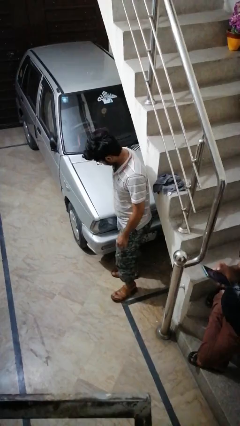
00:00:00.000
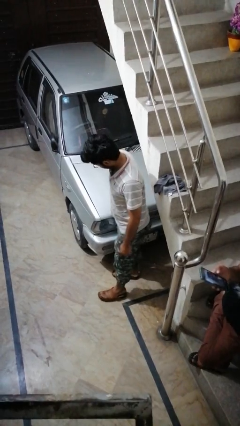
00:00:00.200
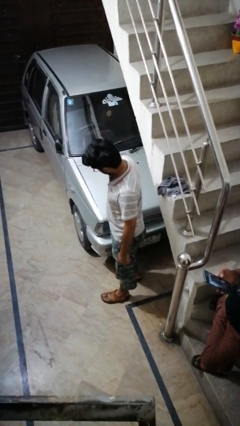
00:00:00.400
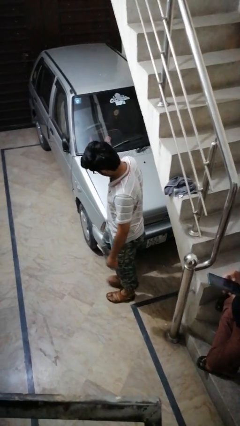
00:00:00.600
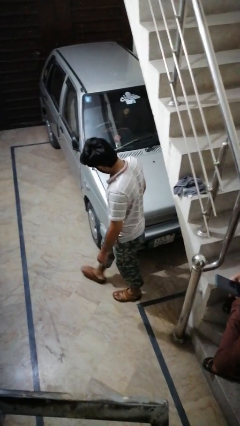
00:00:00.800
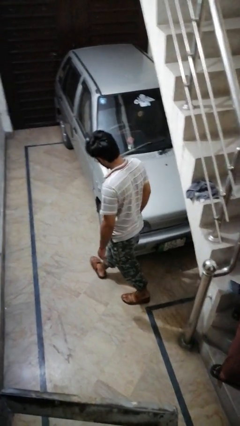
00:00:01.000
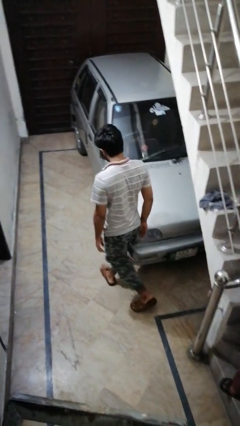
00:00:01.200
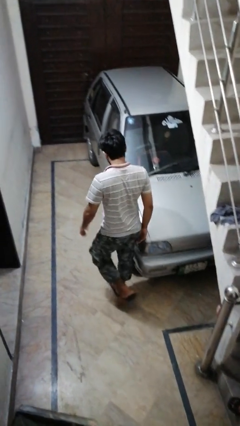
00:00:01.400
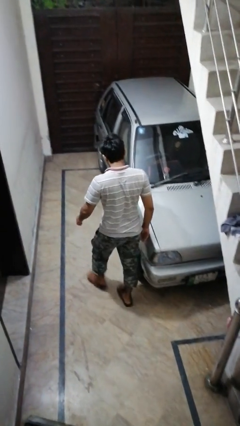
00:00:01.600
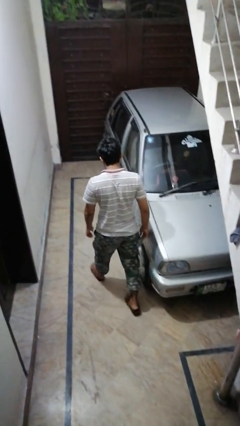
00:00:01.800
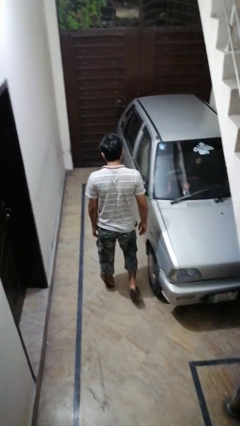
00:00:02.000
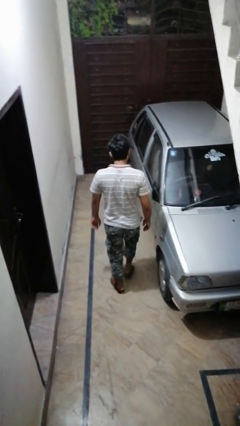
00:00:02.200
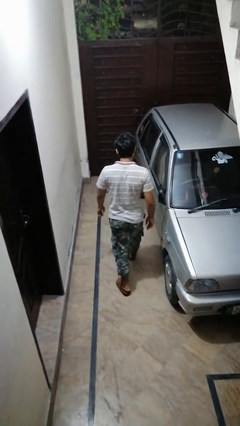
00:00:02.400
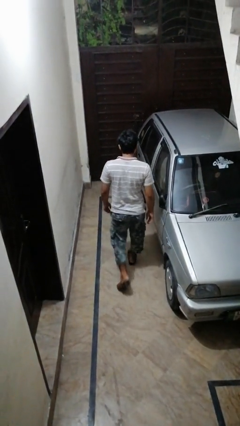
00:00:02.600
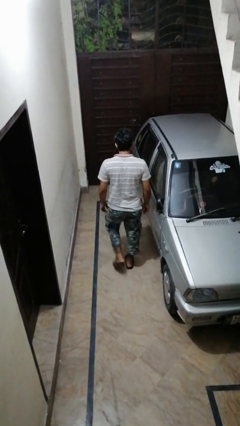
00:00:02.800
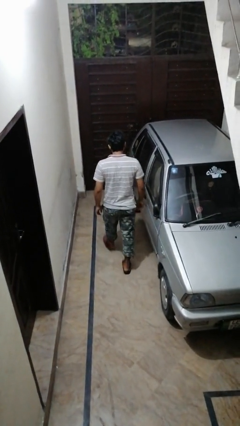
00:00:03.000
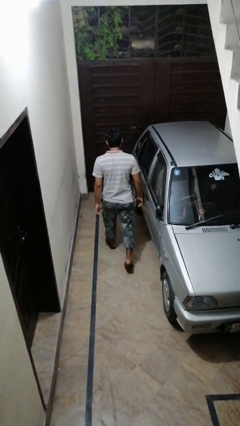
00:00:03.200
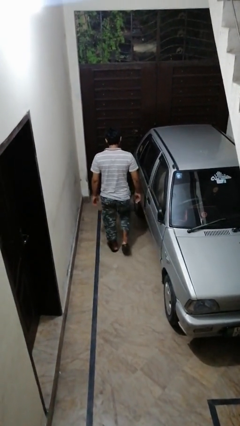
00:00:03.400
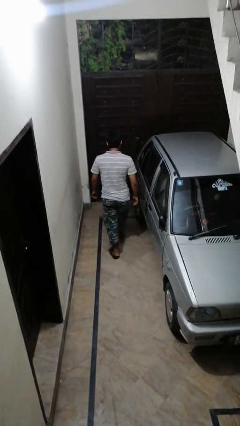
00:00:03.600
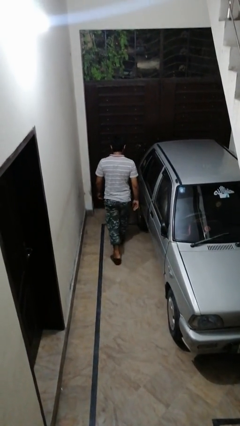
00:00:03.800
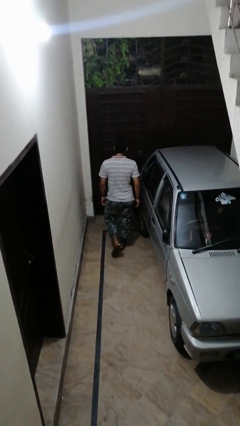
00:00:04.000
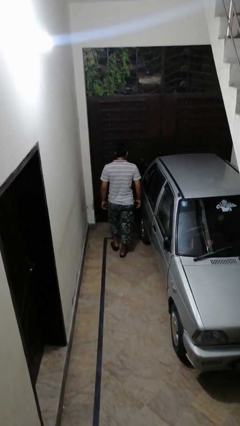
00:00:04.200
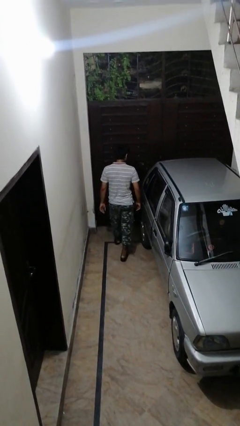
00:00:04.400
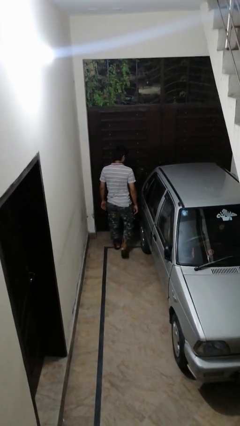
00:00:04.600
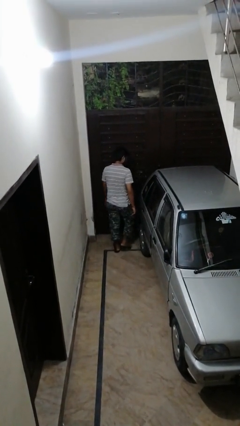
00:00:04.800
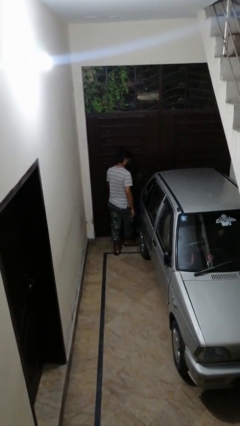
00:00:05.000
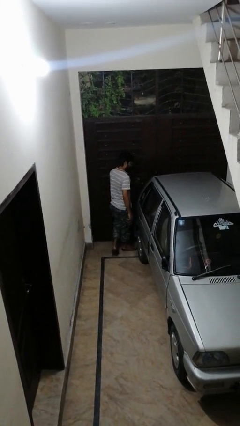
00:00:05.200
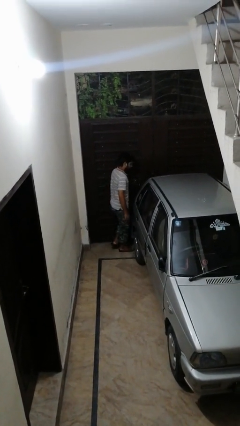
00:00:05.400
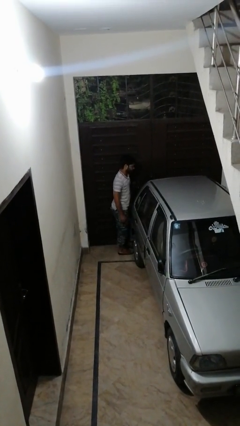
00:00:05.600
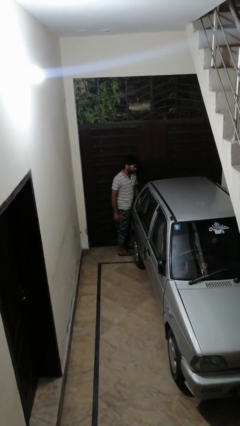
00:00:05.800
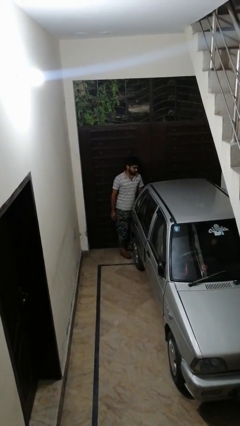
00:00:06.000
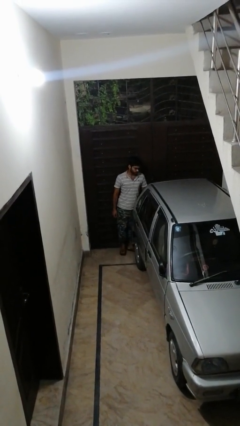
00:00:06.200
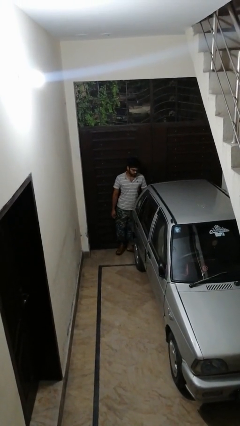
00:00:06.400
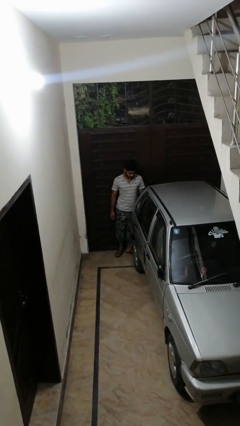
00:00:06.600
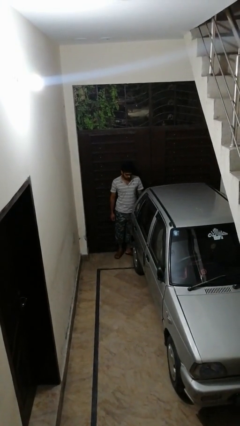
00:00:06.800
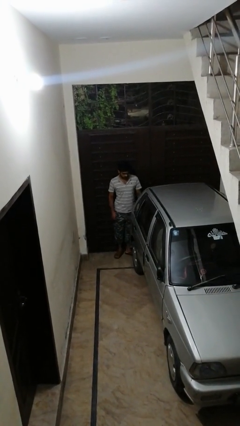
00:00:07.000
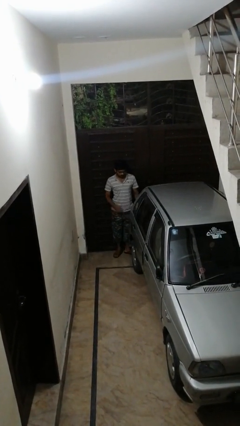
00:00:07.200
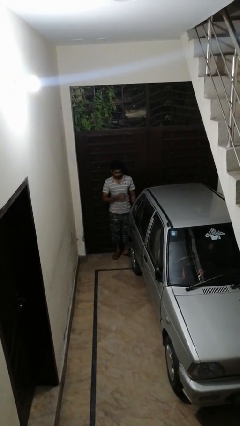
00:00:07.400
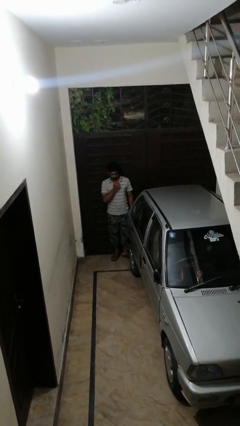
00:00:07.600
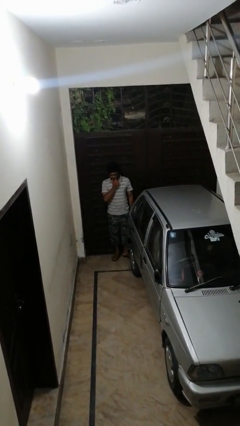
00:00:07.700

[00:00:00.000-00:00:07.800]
person walks around car

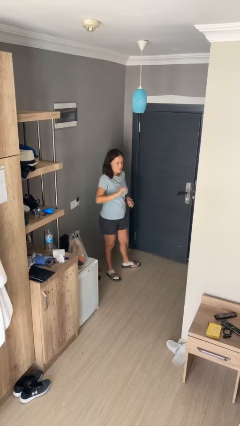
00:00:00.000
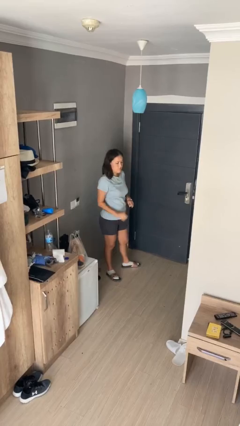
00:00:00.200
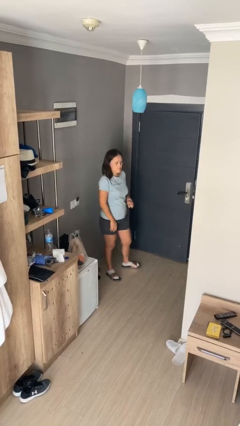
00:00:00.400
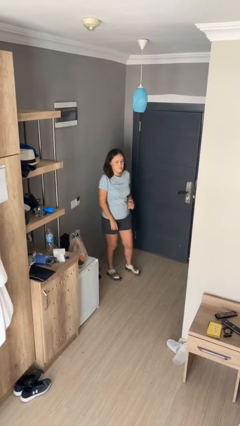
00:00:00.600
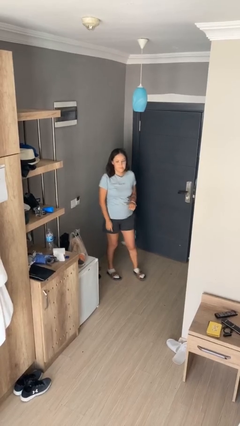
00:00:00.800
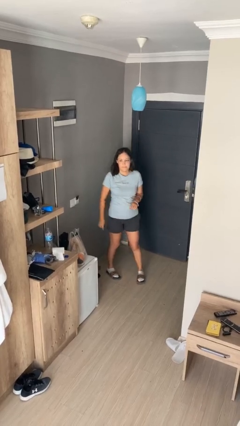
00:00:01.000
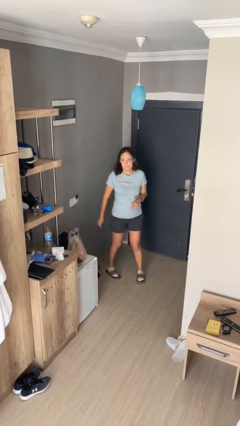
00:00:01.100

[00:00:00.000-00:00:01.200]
person gestures swipe down

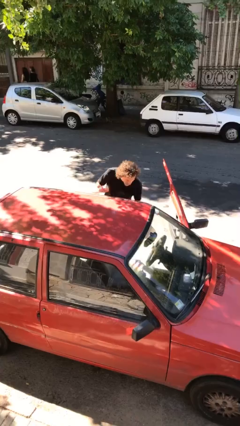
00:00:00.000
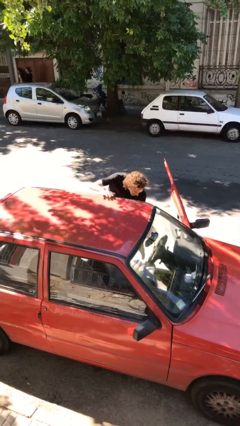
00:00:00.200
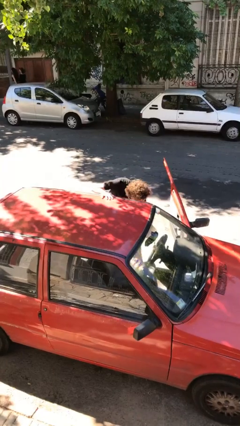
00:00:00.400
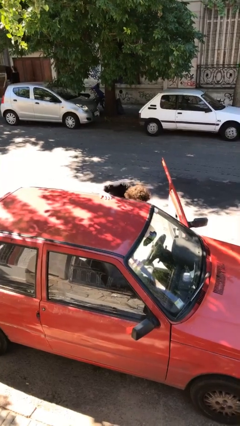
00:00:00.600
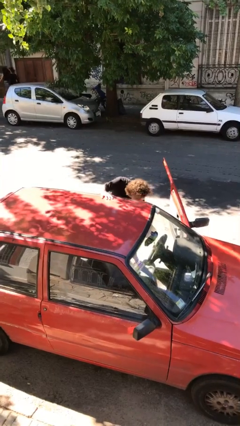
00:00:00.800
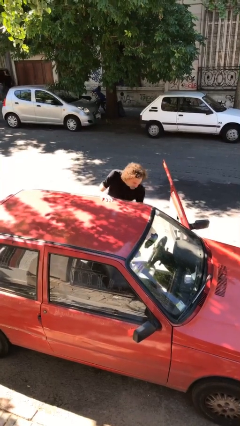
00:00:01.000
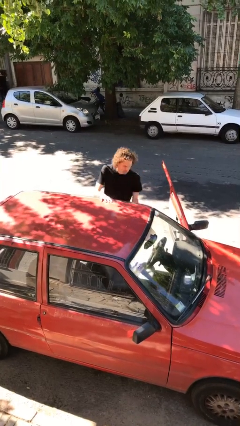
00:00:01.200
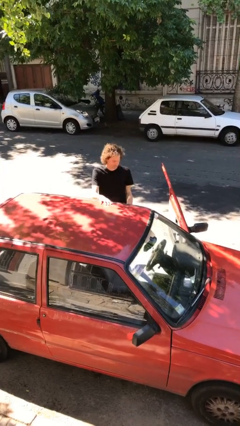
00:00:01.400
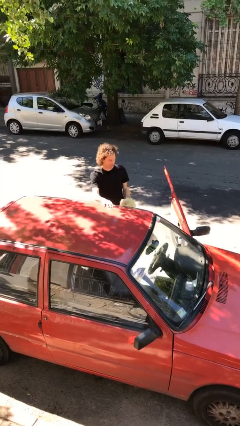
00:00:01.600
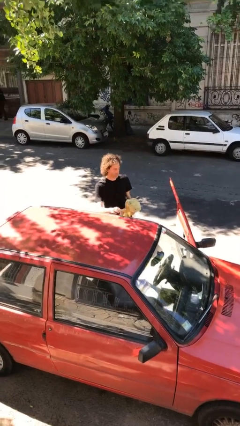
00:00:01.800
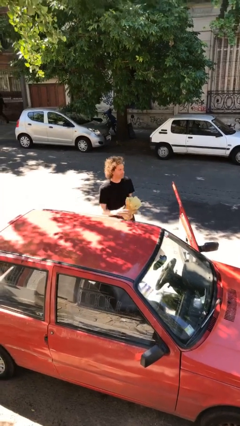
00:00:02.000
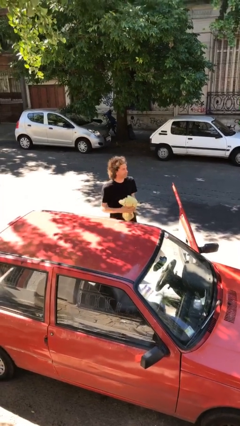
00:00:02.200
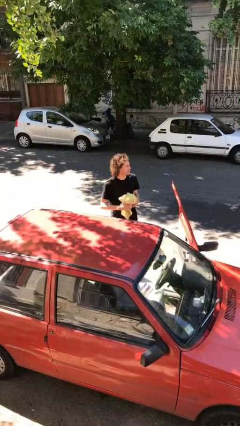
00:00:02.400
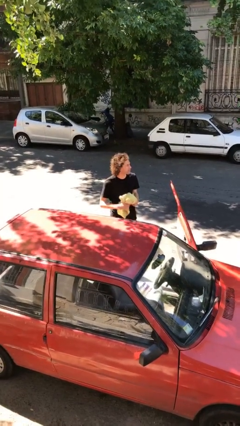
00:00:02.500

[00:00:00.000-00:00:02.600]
person unloads car

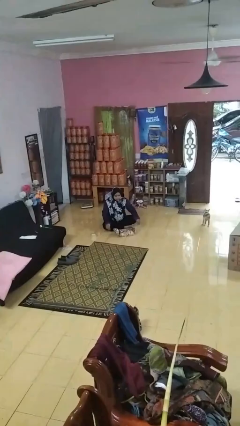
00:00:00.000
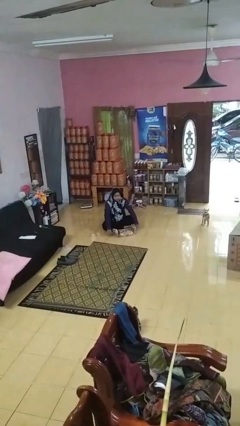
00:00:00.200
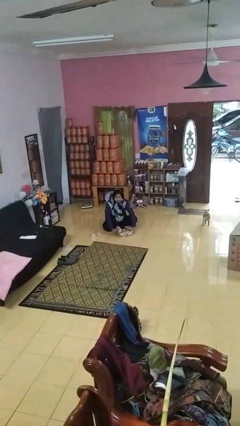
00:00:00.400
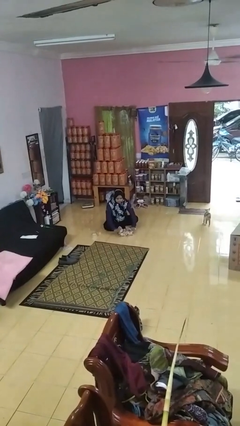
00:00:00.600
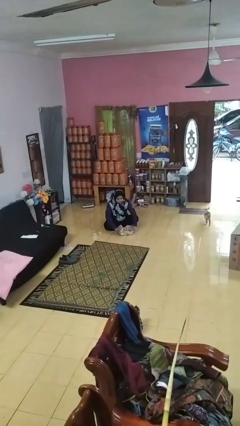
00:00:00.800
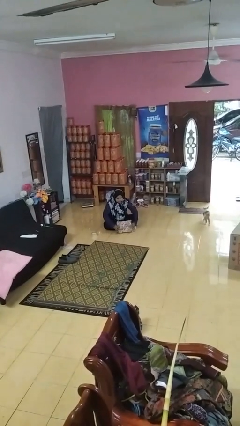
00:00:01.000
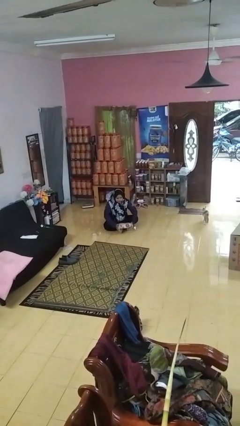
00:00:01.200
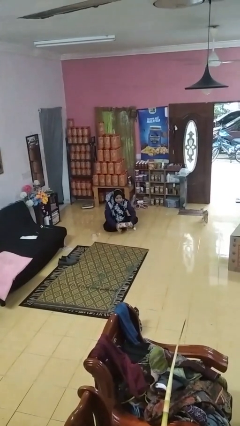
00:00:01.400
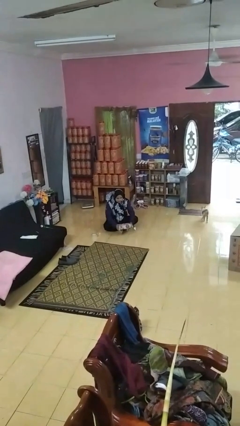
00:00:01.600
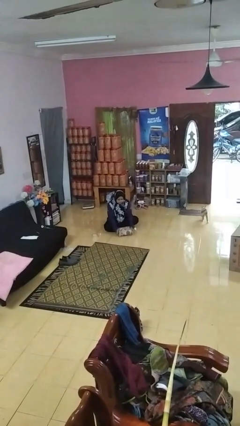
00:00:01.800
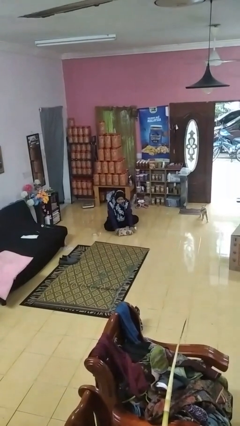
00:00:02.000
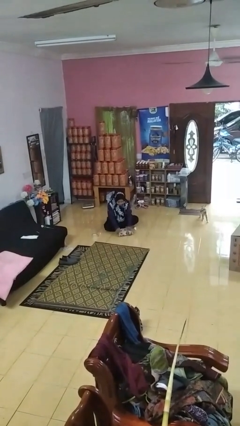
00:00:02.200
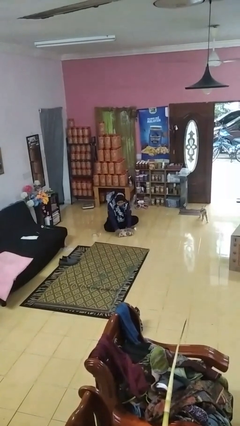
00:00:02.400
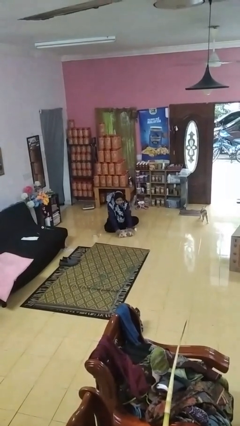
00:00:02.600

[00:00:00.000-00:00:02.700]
person wraps box

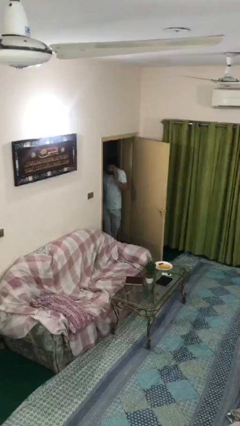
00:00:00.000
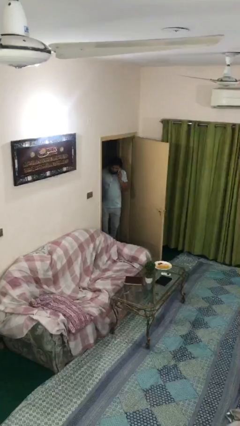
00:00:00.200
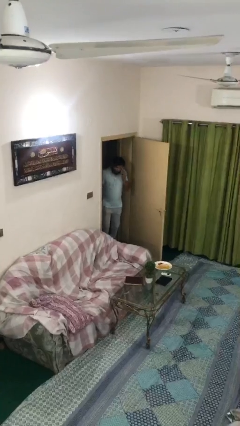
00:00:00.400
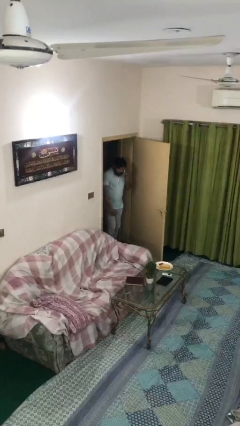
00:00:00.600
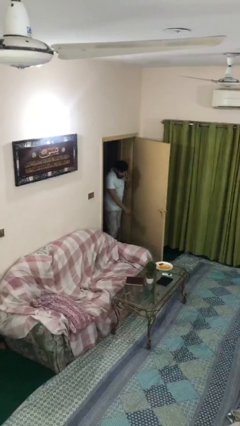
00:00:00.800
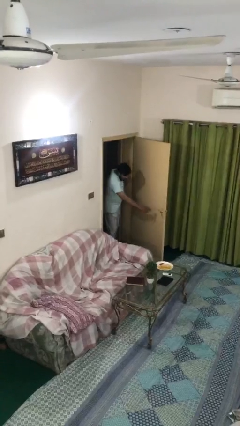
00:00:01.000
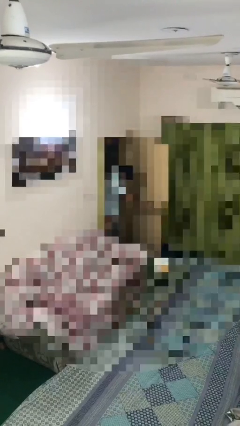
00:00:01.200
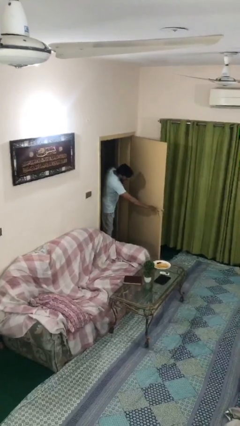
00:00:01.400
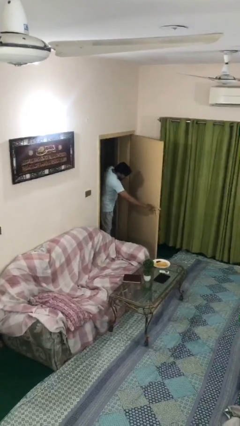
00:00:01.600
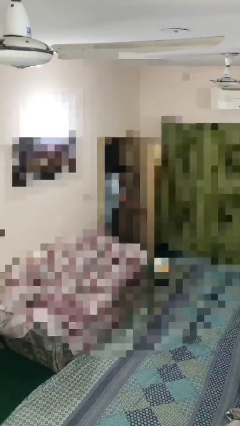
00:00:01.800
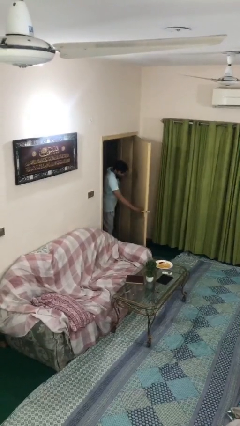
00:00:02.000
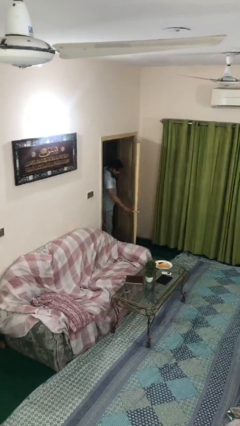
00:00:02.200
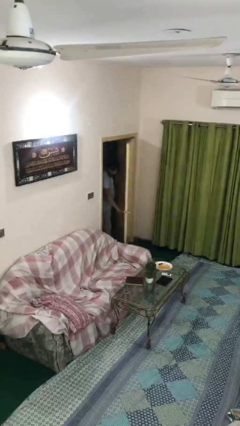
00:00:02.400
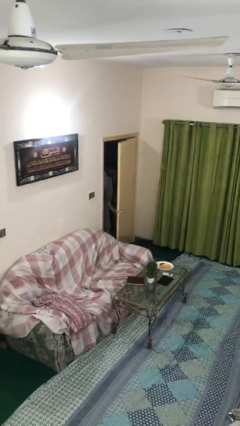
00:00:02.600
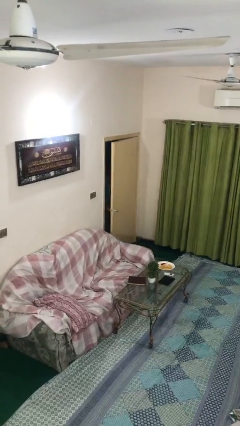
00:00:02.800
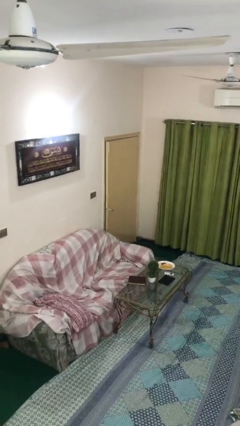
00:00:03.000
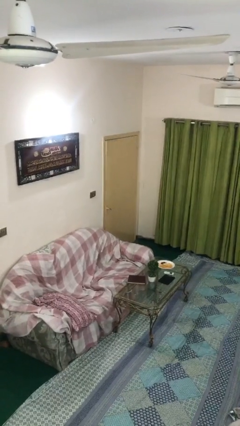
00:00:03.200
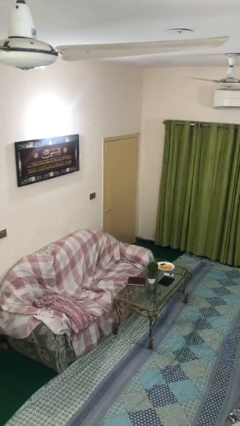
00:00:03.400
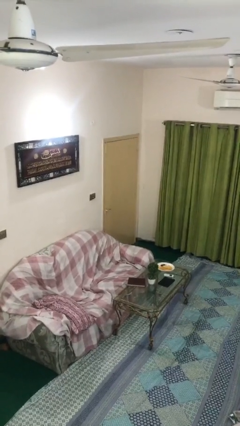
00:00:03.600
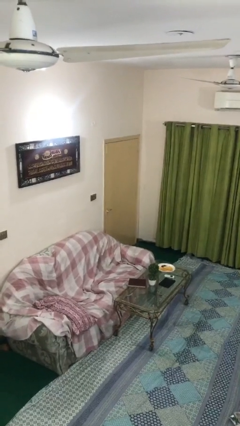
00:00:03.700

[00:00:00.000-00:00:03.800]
person closes facility door
